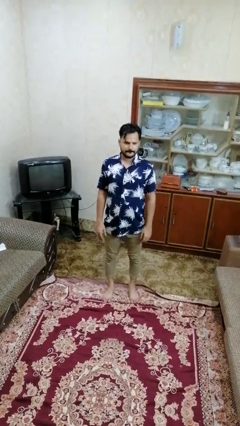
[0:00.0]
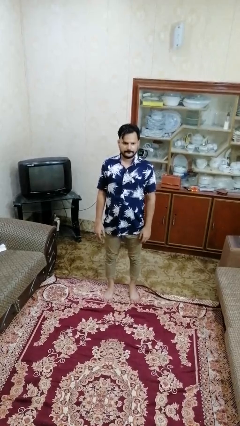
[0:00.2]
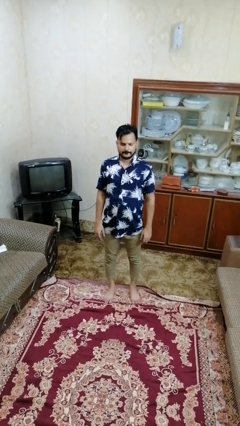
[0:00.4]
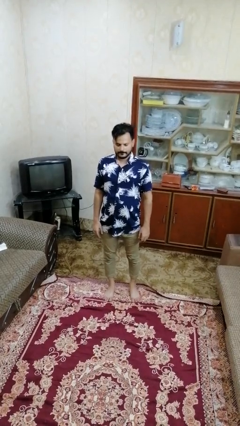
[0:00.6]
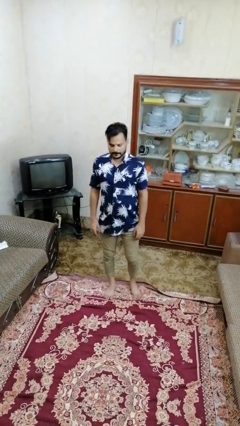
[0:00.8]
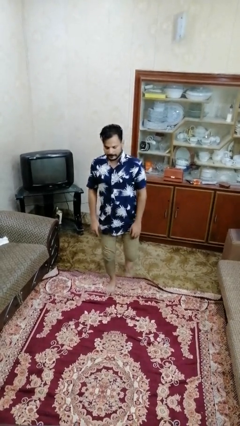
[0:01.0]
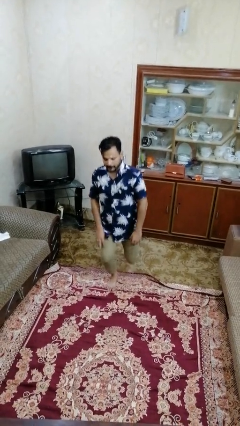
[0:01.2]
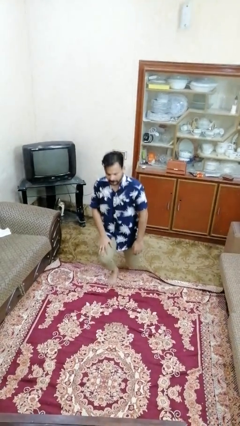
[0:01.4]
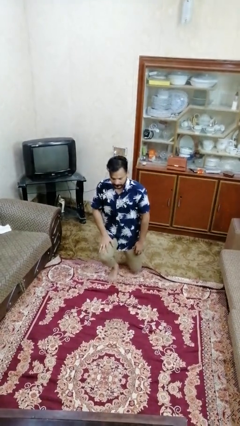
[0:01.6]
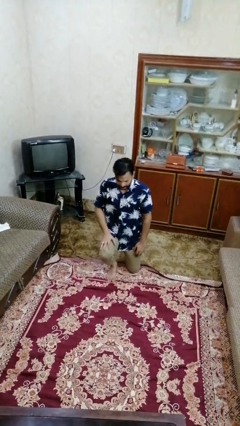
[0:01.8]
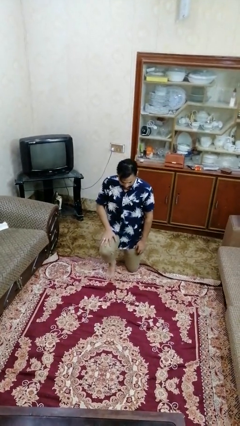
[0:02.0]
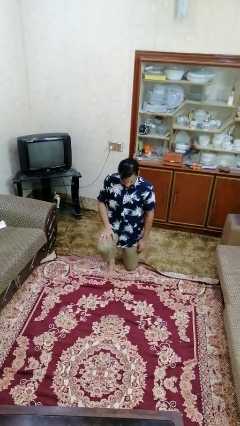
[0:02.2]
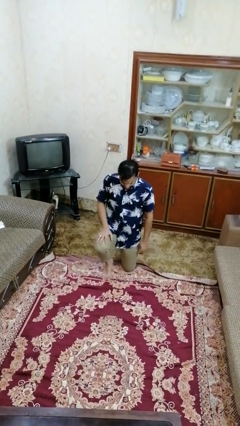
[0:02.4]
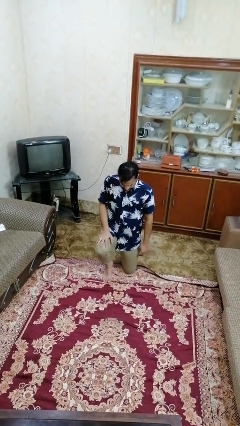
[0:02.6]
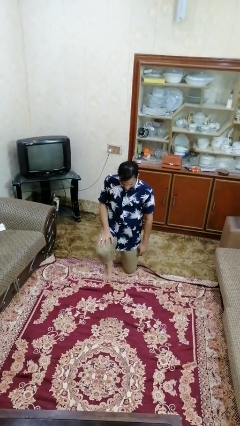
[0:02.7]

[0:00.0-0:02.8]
person kneels

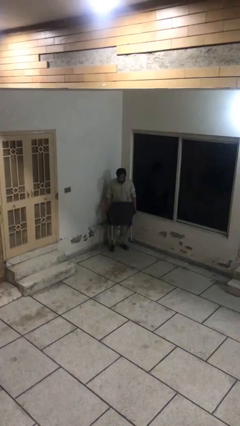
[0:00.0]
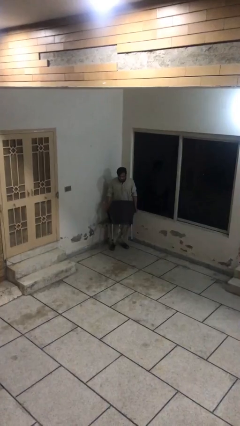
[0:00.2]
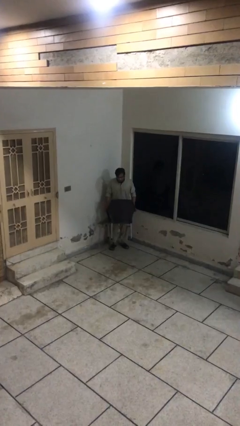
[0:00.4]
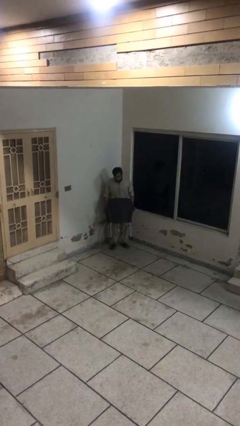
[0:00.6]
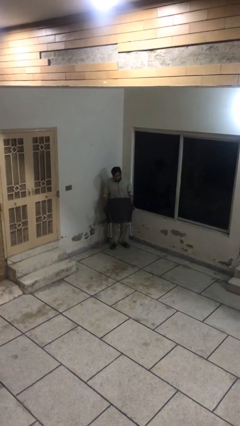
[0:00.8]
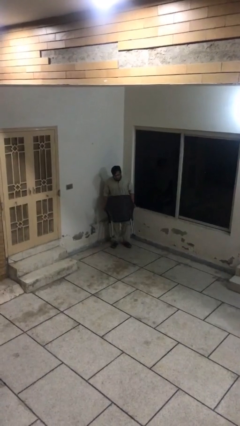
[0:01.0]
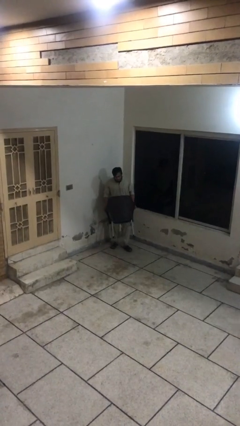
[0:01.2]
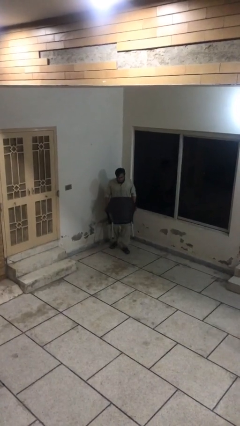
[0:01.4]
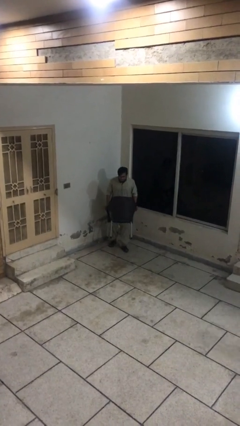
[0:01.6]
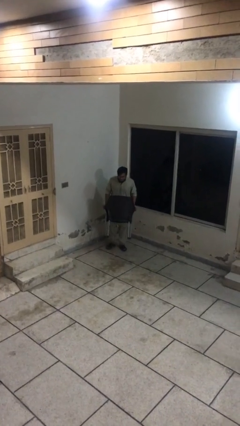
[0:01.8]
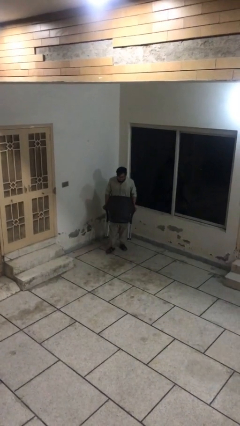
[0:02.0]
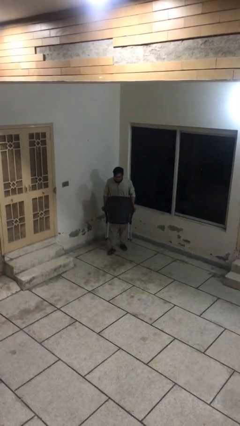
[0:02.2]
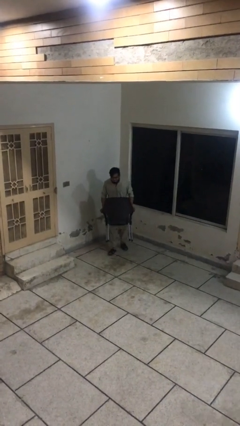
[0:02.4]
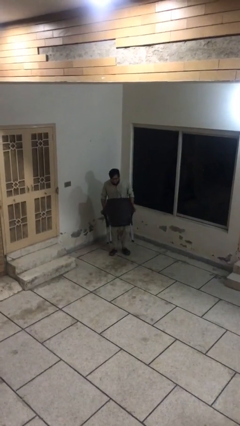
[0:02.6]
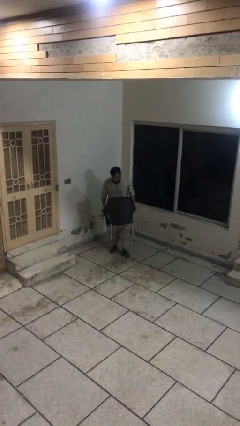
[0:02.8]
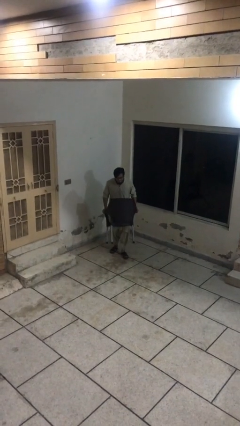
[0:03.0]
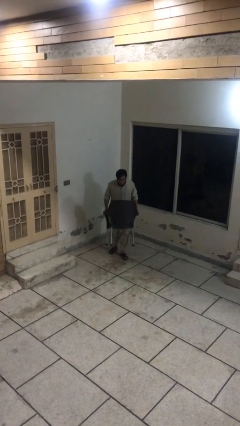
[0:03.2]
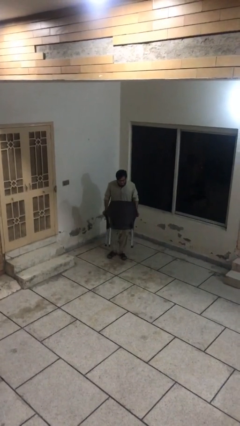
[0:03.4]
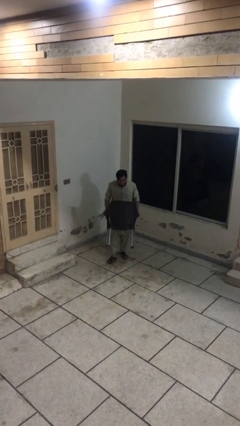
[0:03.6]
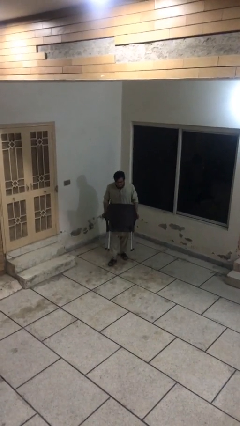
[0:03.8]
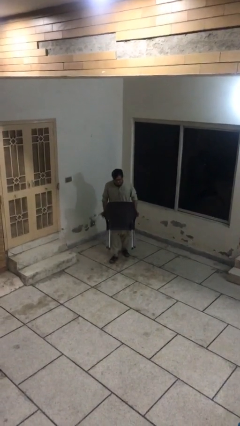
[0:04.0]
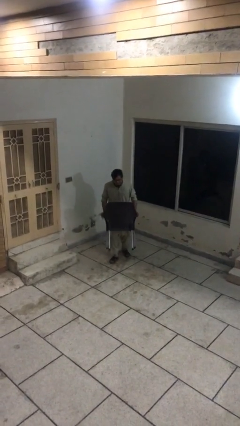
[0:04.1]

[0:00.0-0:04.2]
person carries heavy object

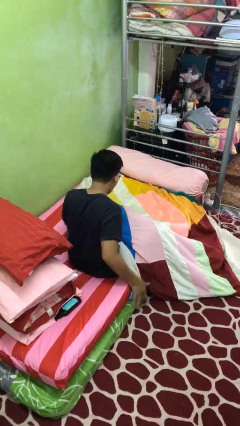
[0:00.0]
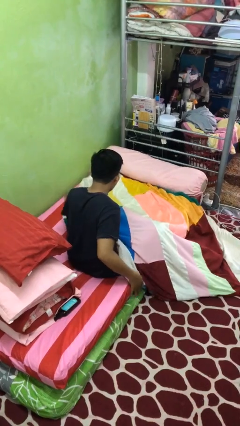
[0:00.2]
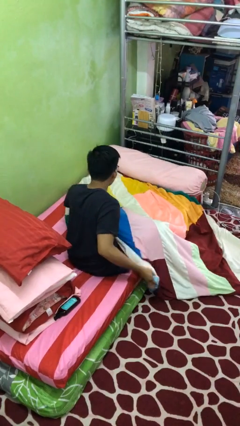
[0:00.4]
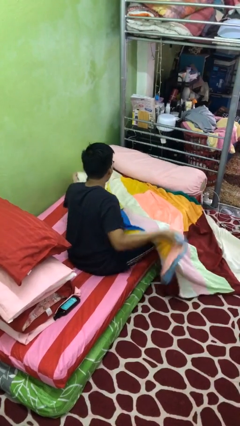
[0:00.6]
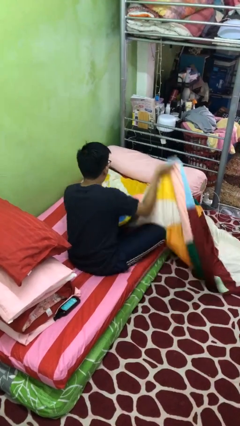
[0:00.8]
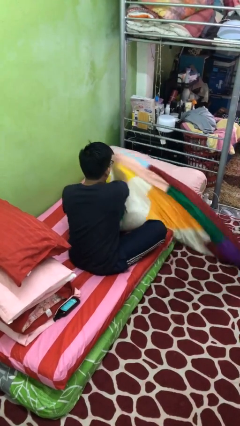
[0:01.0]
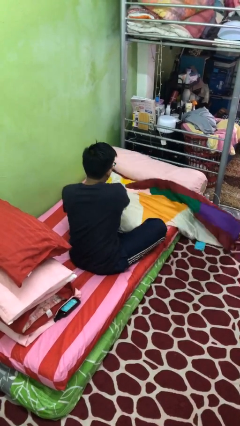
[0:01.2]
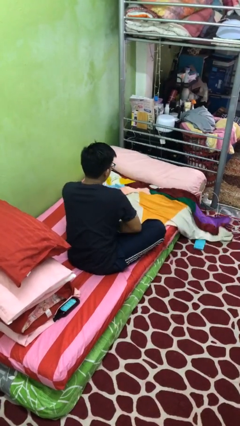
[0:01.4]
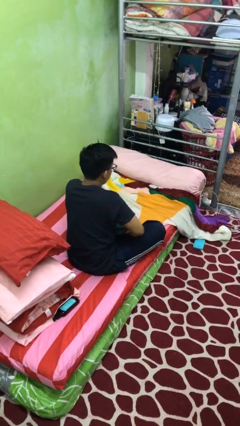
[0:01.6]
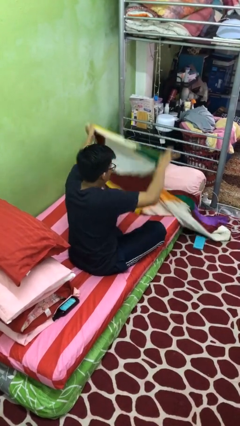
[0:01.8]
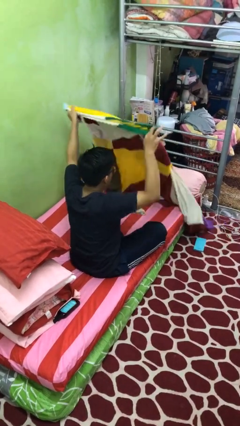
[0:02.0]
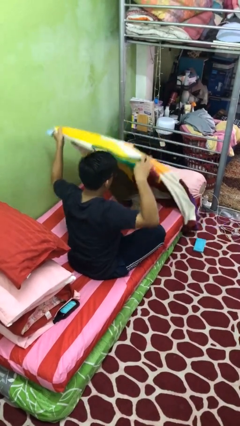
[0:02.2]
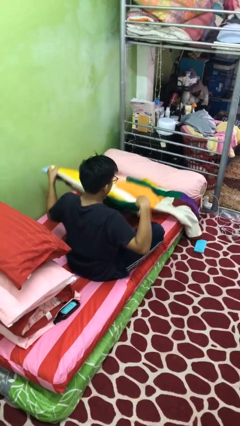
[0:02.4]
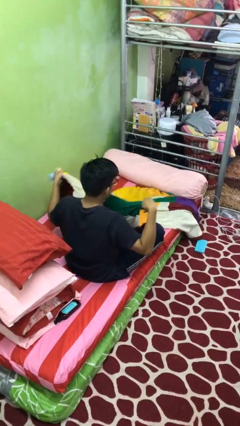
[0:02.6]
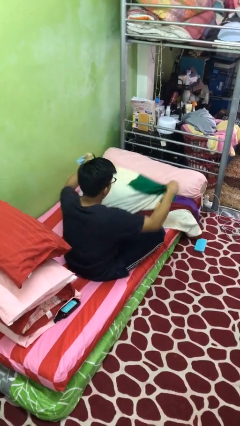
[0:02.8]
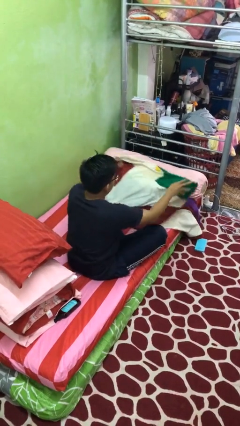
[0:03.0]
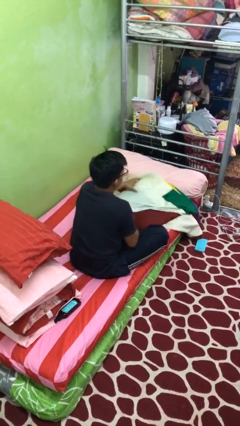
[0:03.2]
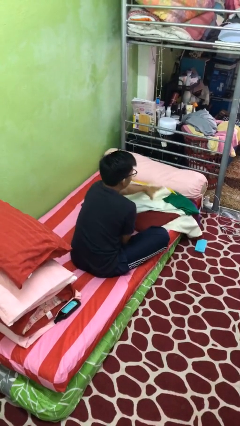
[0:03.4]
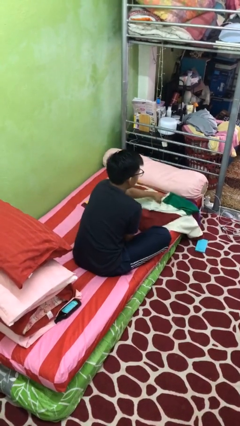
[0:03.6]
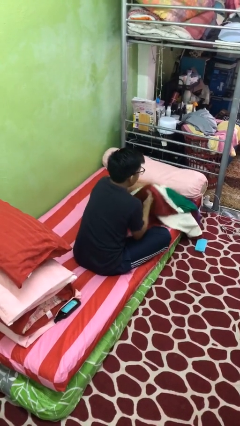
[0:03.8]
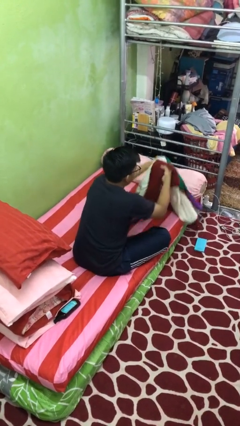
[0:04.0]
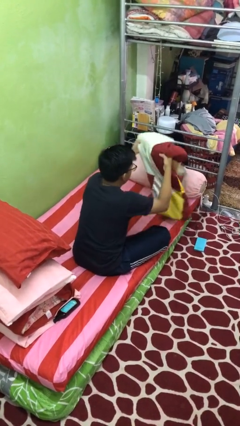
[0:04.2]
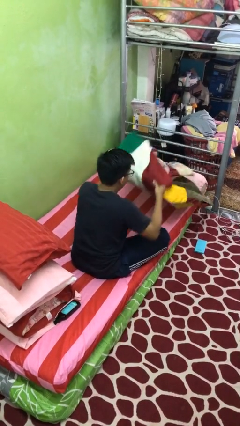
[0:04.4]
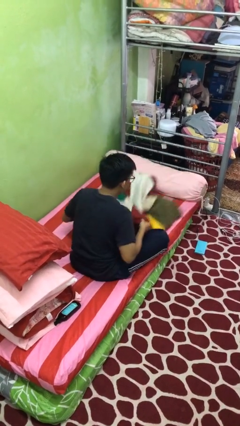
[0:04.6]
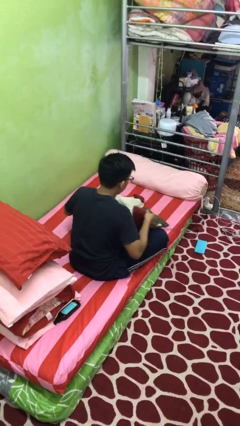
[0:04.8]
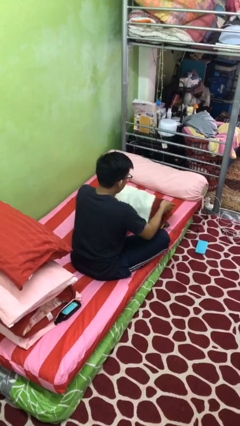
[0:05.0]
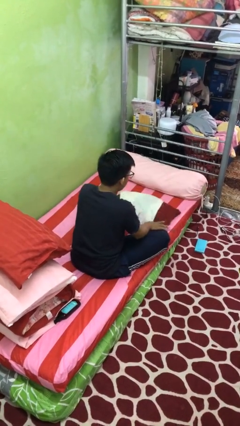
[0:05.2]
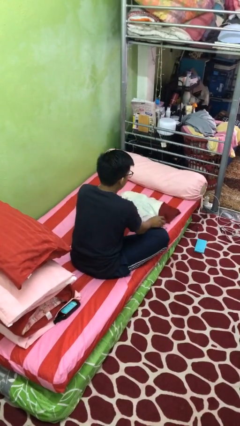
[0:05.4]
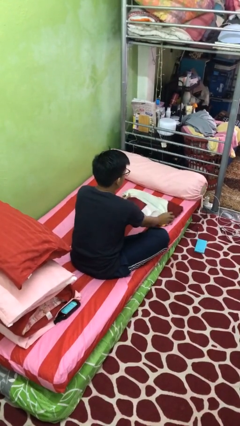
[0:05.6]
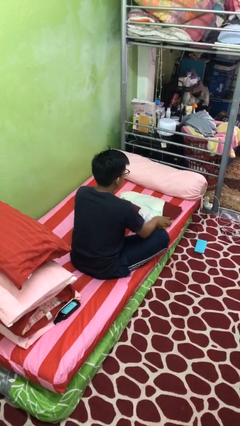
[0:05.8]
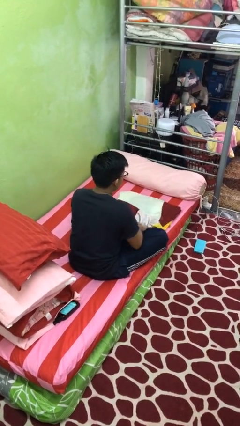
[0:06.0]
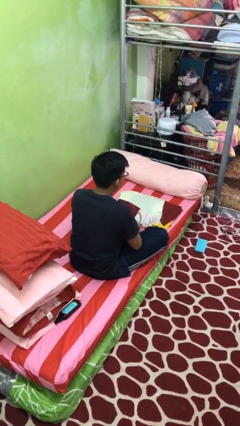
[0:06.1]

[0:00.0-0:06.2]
person folds blanket

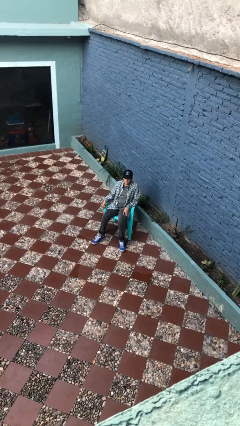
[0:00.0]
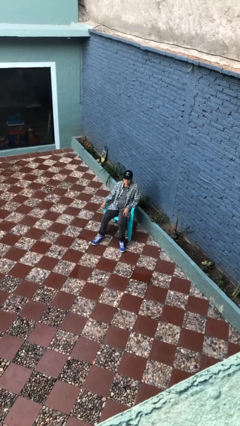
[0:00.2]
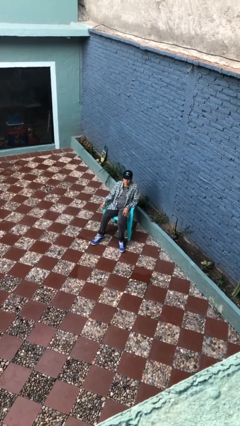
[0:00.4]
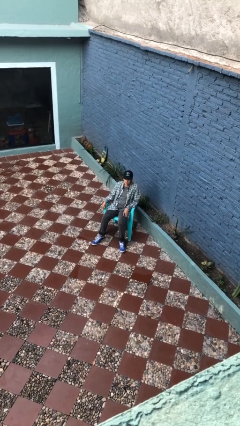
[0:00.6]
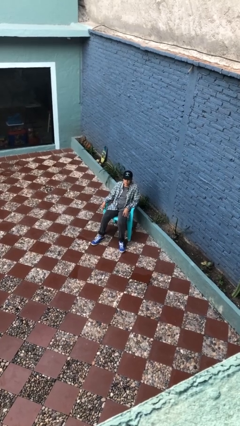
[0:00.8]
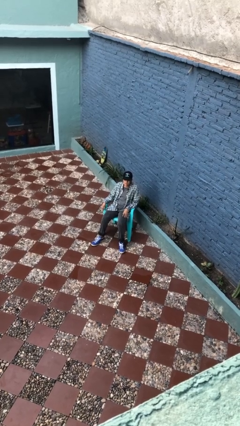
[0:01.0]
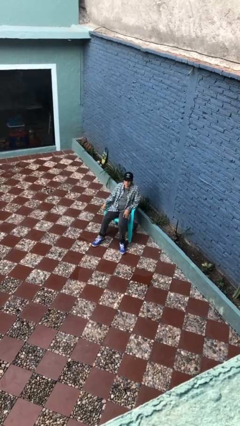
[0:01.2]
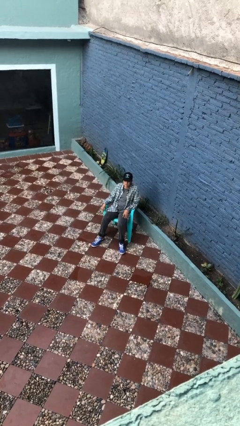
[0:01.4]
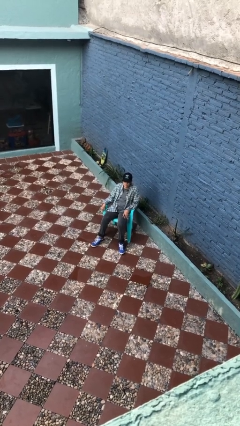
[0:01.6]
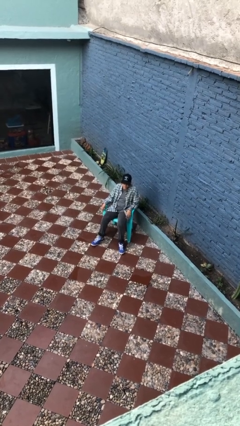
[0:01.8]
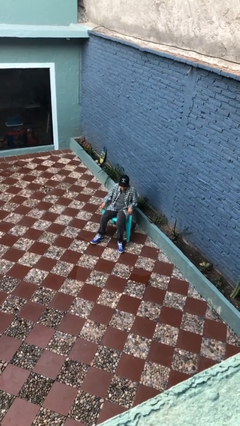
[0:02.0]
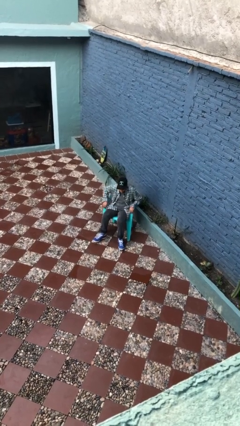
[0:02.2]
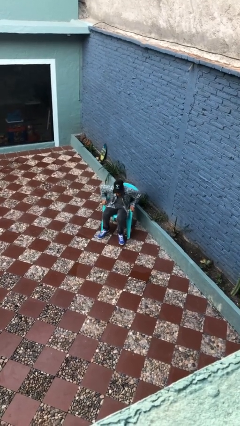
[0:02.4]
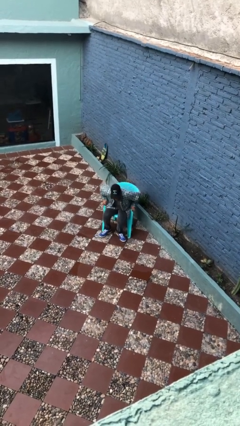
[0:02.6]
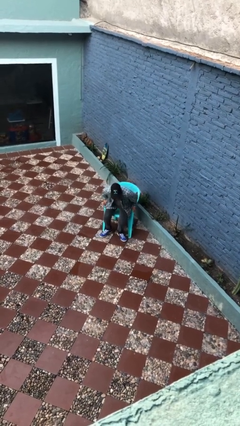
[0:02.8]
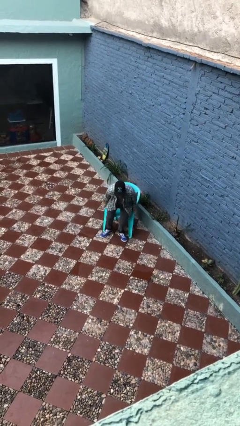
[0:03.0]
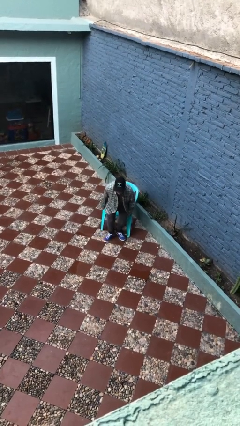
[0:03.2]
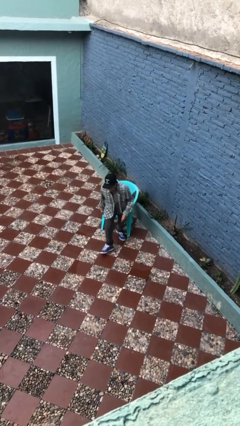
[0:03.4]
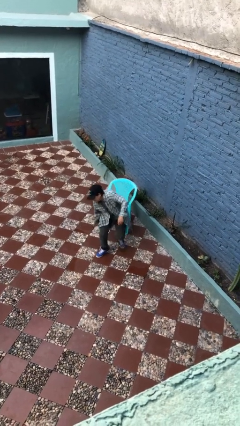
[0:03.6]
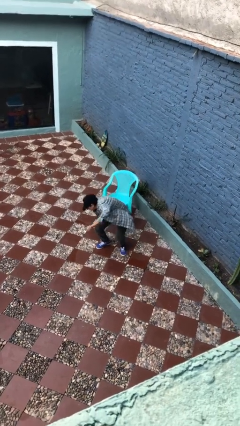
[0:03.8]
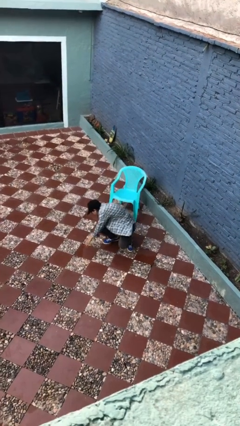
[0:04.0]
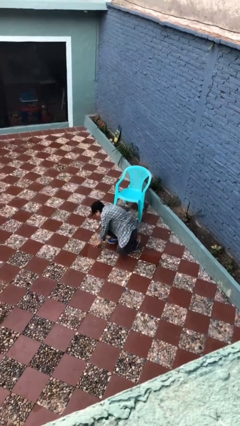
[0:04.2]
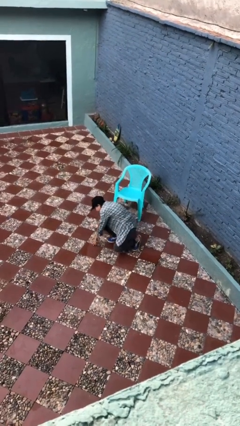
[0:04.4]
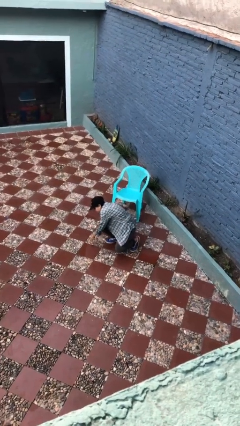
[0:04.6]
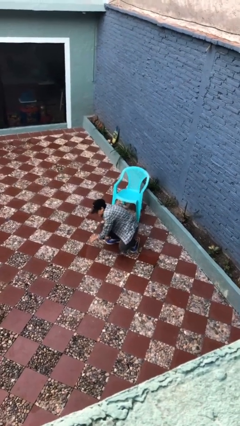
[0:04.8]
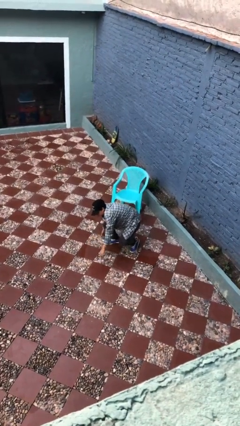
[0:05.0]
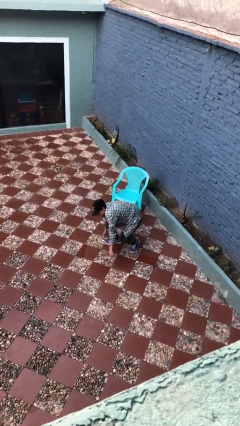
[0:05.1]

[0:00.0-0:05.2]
person falls from chair
